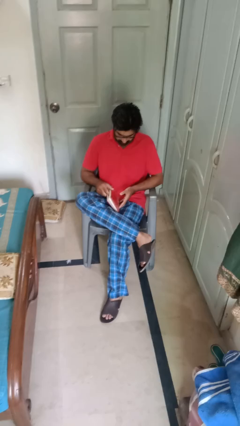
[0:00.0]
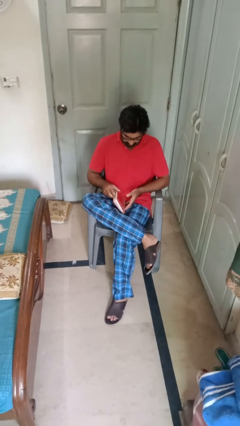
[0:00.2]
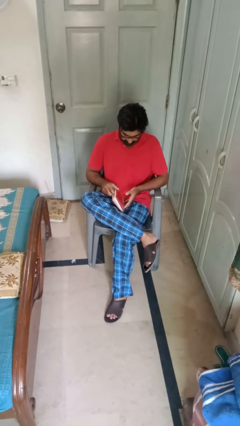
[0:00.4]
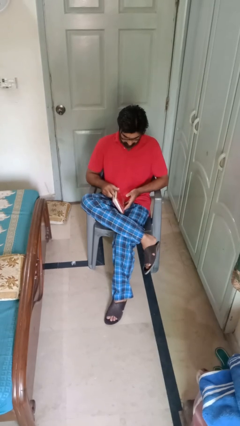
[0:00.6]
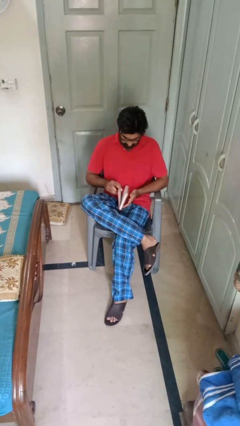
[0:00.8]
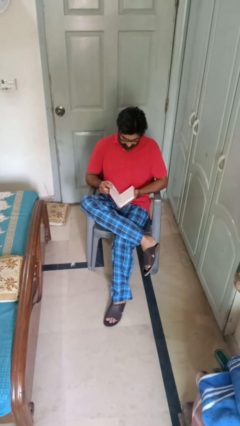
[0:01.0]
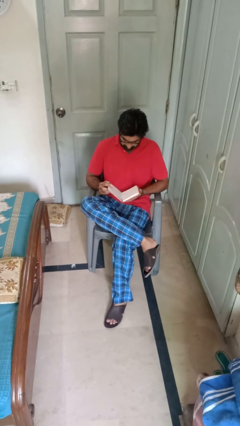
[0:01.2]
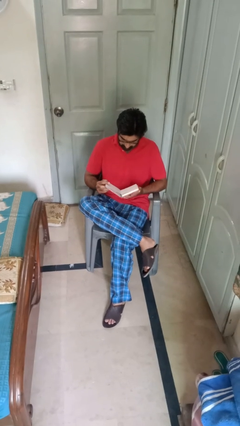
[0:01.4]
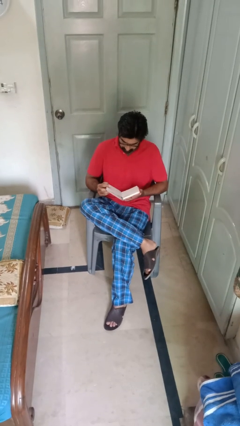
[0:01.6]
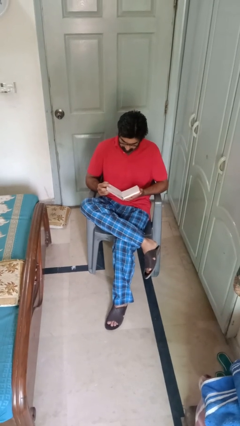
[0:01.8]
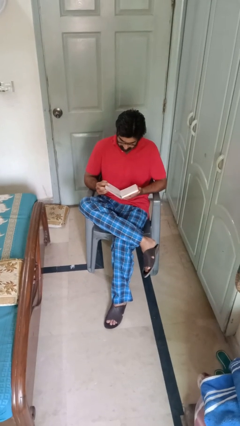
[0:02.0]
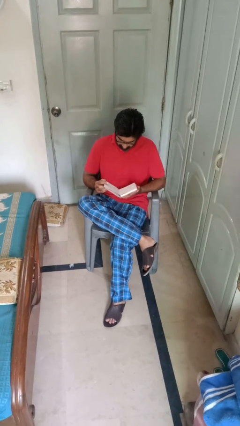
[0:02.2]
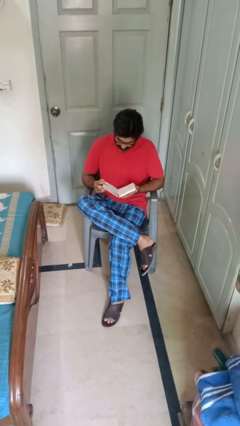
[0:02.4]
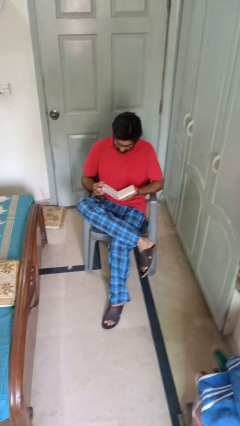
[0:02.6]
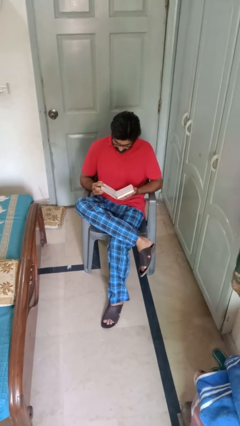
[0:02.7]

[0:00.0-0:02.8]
person reads book

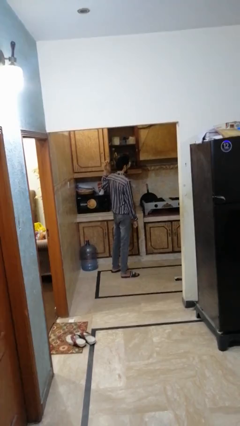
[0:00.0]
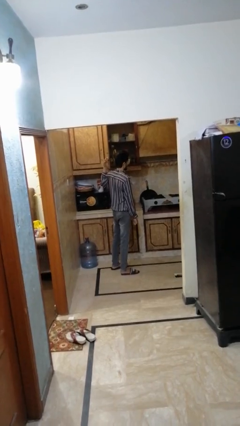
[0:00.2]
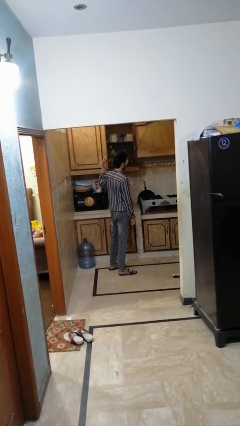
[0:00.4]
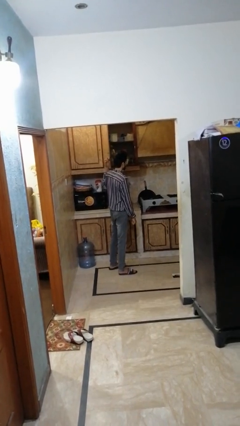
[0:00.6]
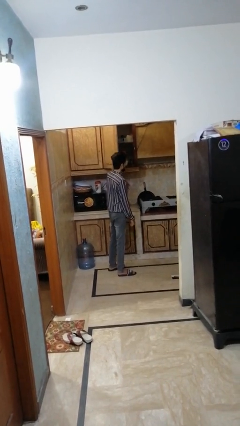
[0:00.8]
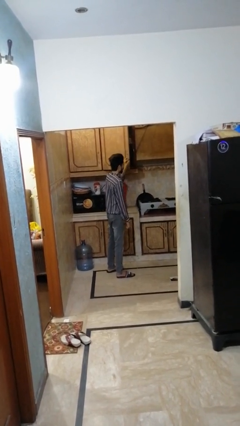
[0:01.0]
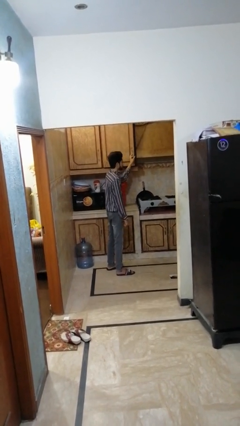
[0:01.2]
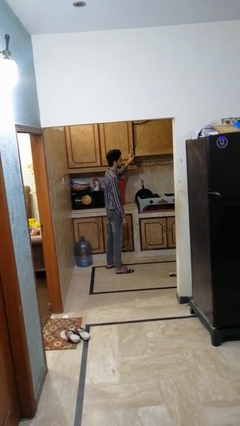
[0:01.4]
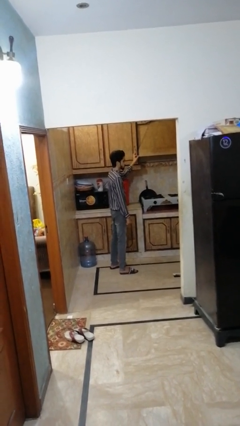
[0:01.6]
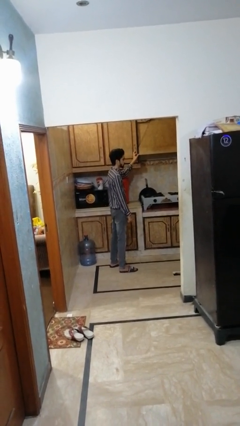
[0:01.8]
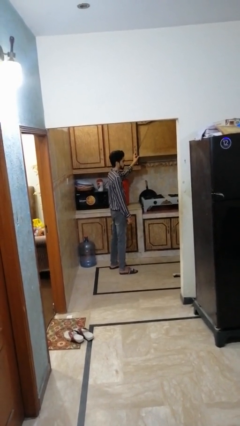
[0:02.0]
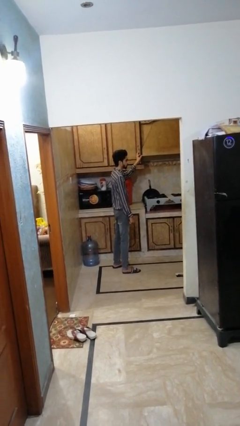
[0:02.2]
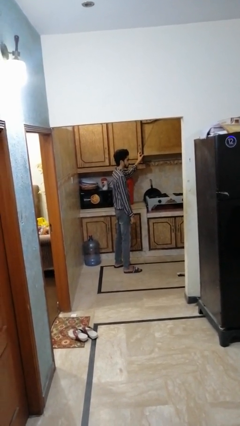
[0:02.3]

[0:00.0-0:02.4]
person closes cabinet

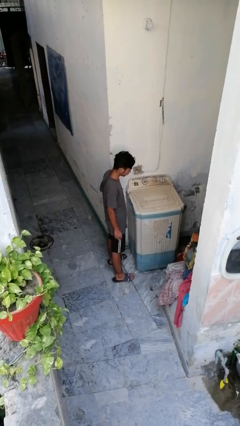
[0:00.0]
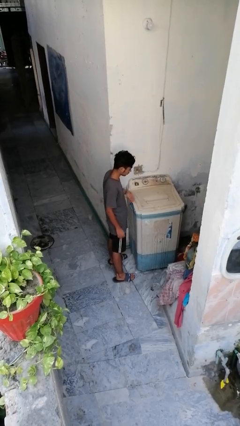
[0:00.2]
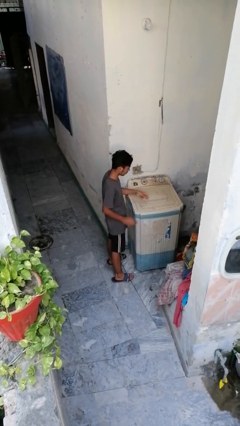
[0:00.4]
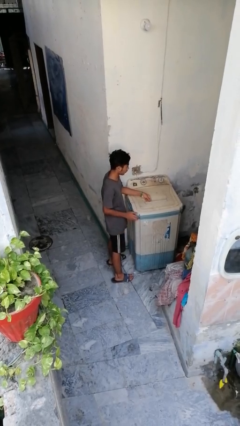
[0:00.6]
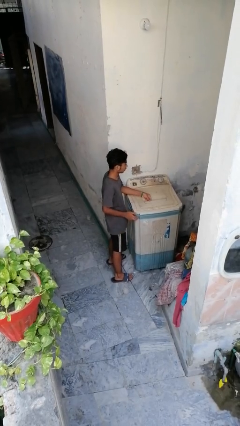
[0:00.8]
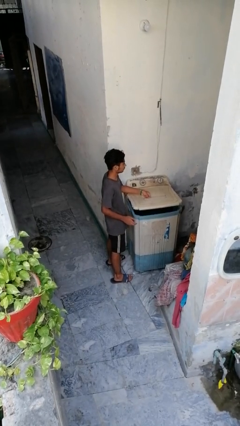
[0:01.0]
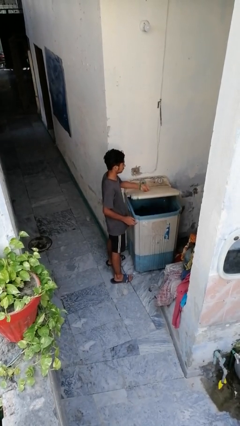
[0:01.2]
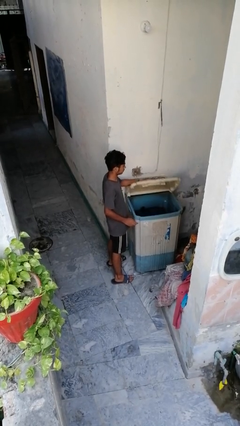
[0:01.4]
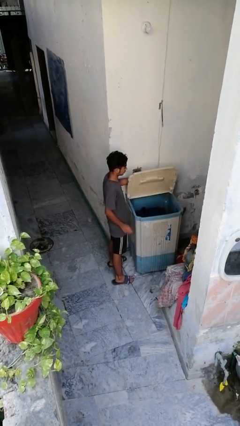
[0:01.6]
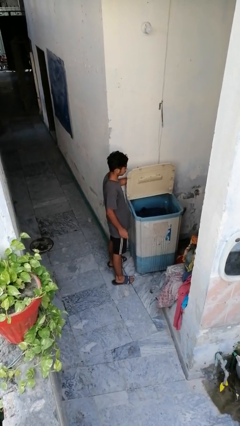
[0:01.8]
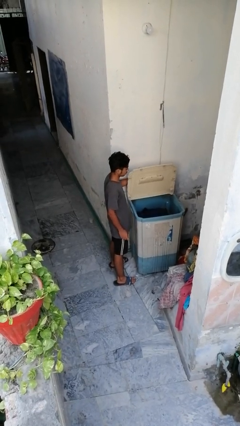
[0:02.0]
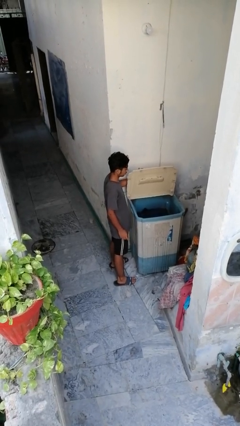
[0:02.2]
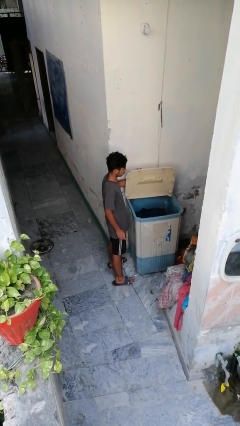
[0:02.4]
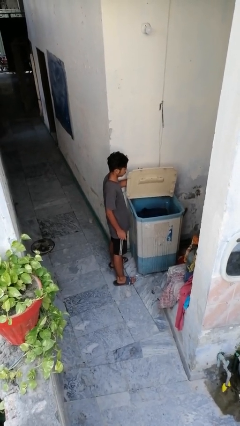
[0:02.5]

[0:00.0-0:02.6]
person opens clothes washer

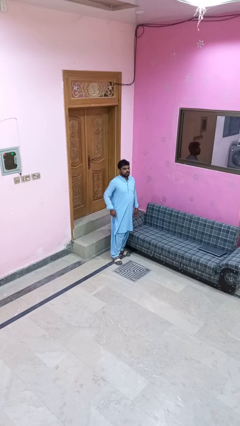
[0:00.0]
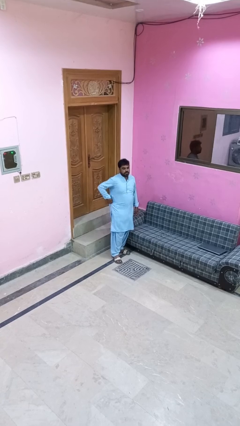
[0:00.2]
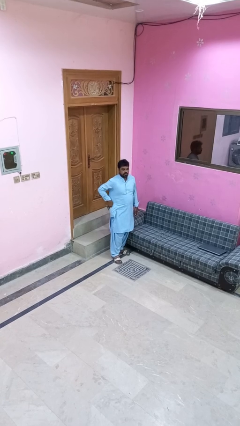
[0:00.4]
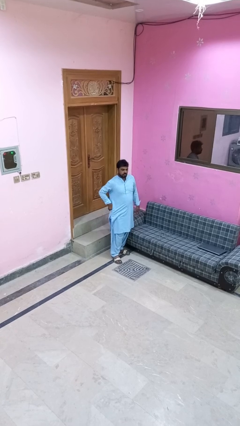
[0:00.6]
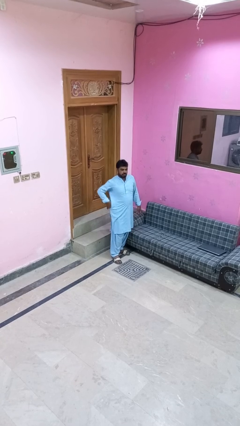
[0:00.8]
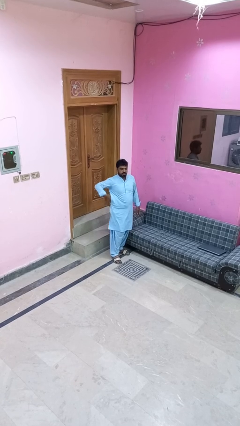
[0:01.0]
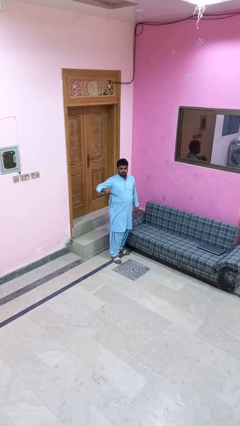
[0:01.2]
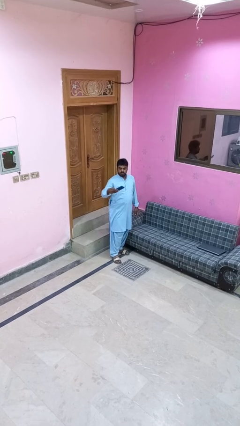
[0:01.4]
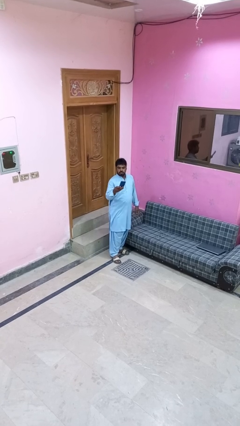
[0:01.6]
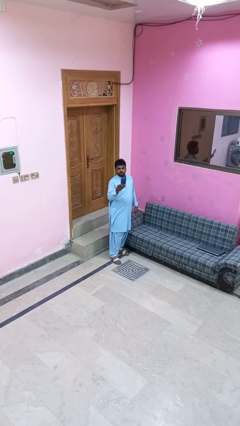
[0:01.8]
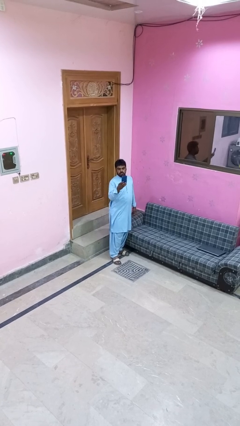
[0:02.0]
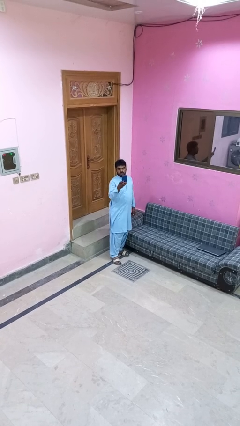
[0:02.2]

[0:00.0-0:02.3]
person takes phone from pocket

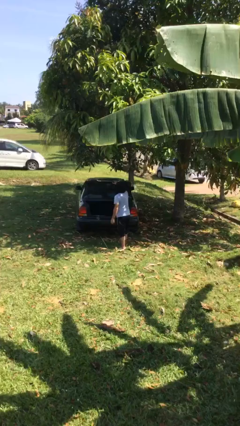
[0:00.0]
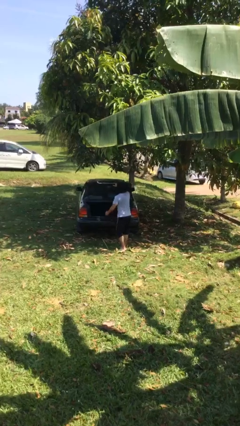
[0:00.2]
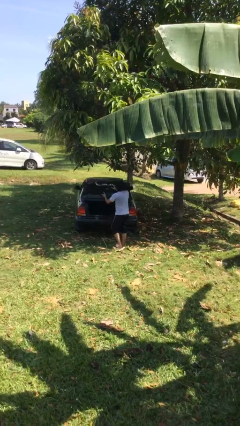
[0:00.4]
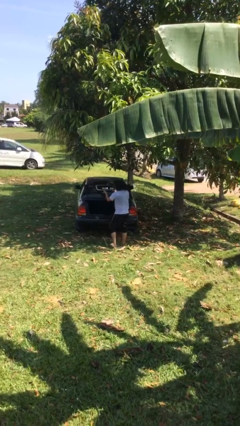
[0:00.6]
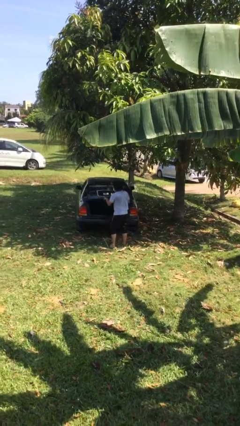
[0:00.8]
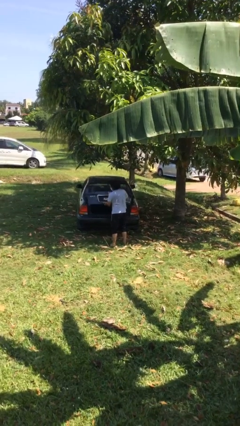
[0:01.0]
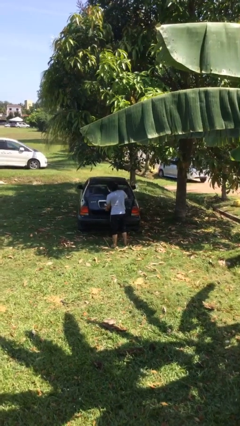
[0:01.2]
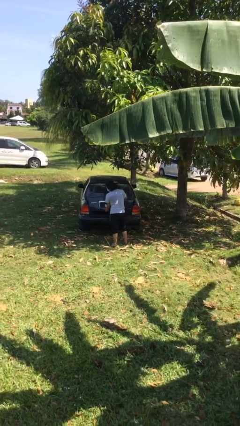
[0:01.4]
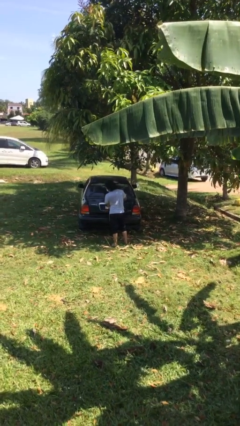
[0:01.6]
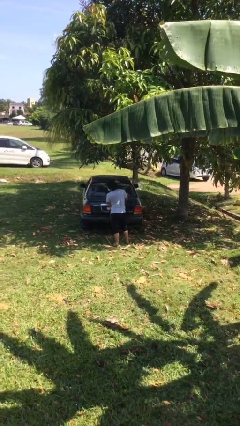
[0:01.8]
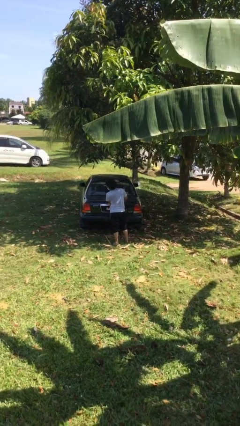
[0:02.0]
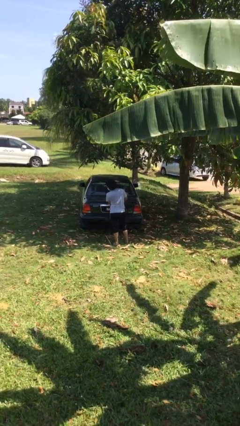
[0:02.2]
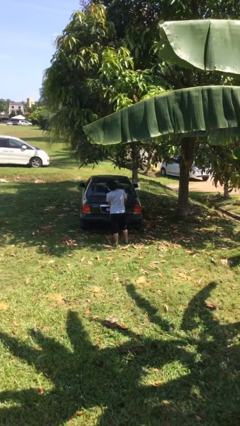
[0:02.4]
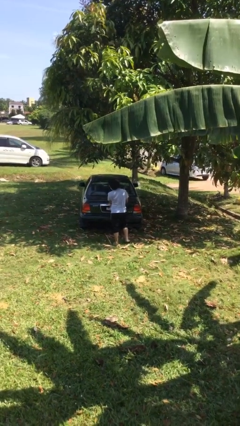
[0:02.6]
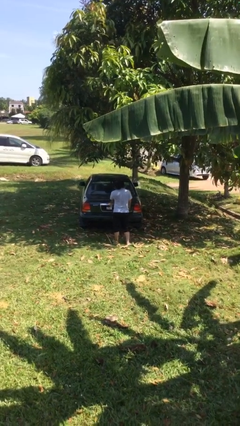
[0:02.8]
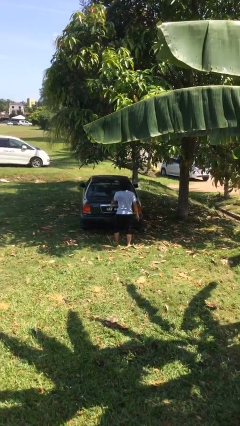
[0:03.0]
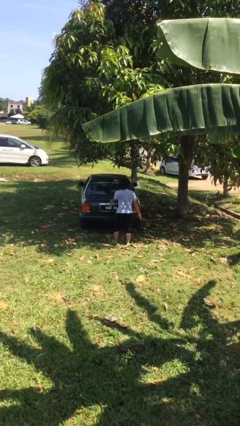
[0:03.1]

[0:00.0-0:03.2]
person closes car trunk

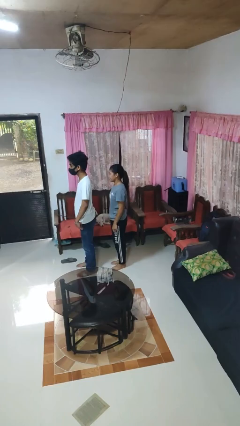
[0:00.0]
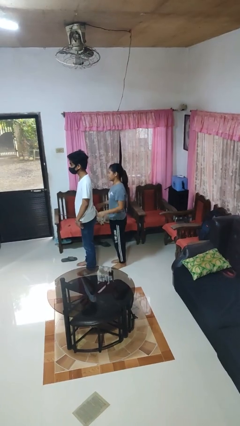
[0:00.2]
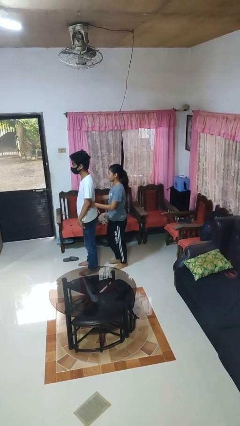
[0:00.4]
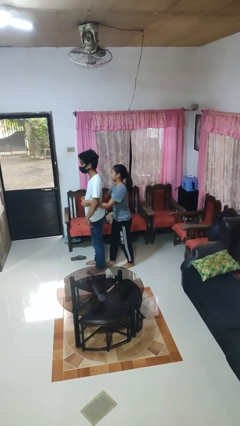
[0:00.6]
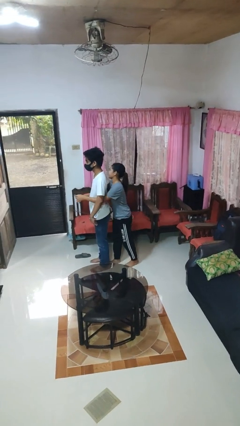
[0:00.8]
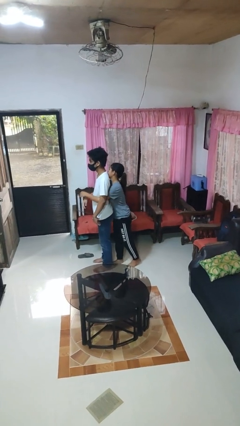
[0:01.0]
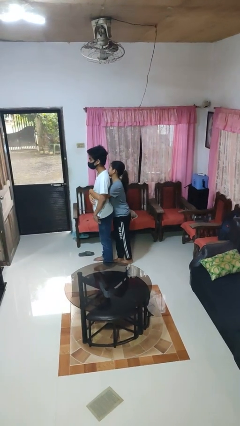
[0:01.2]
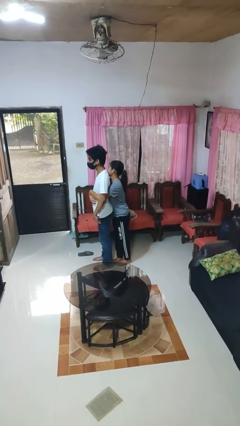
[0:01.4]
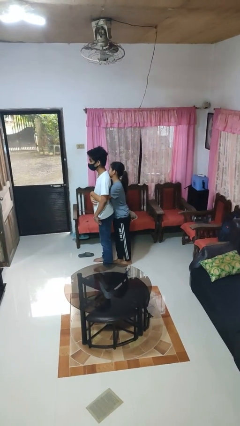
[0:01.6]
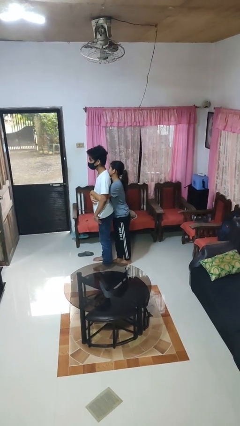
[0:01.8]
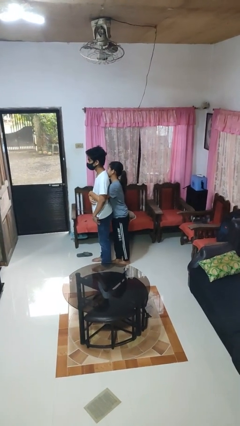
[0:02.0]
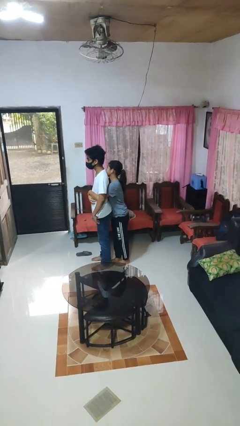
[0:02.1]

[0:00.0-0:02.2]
person hugs person from behind

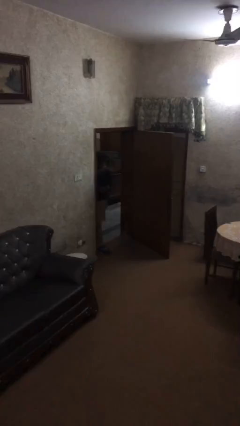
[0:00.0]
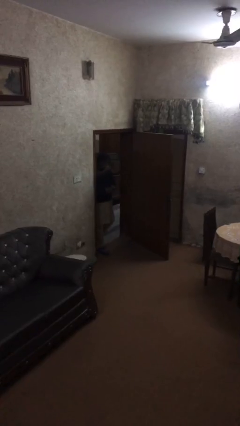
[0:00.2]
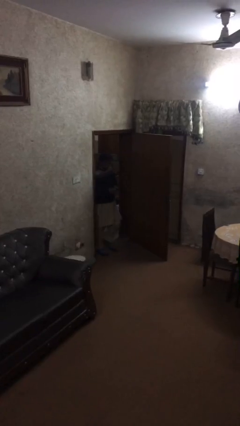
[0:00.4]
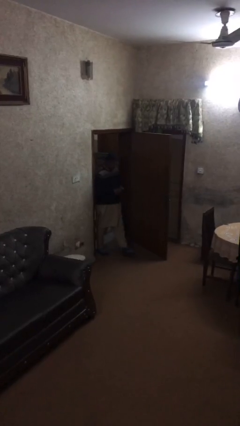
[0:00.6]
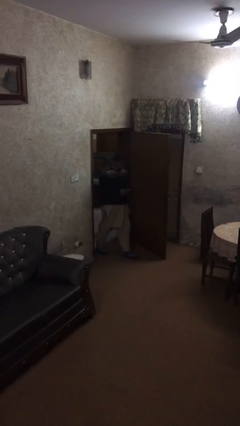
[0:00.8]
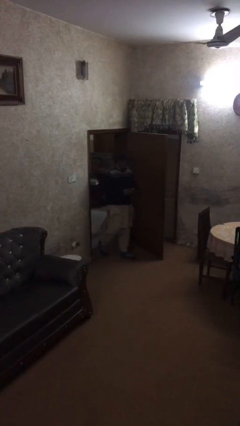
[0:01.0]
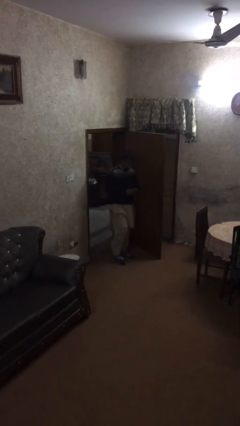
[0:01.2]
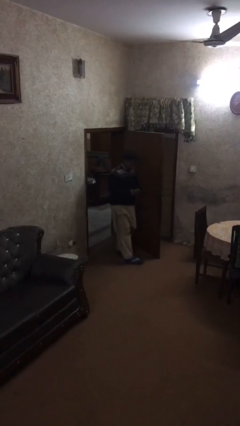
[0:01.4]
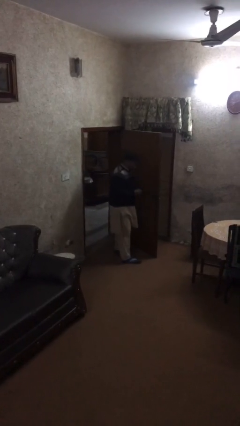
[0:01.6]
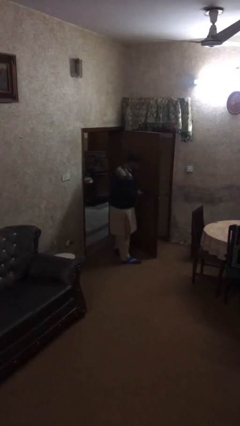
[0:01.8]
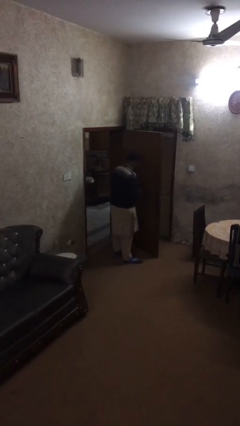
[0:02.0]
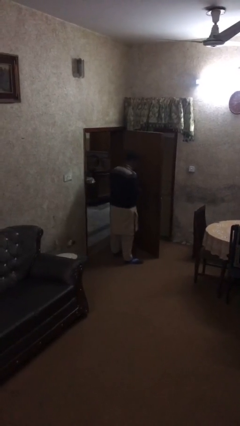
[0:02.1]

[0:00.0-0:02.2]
person enters scene through structure
